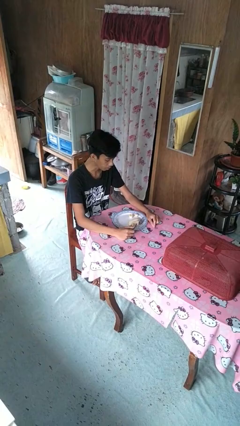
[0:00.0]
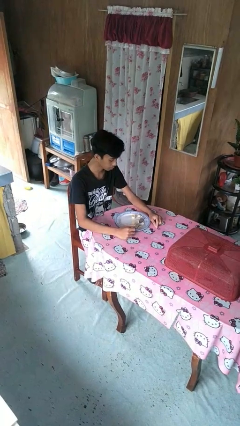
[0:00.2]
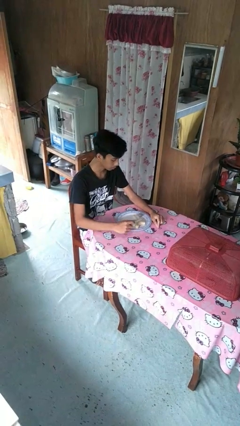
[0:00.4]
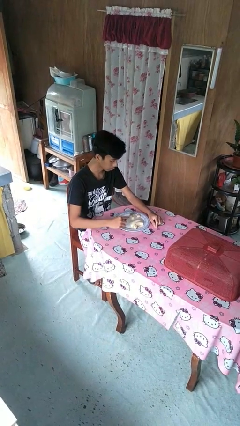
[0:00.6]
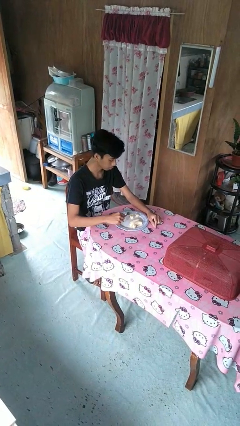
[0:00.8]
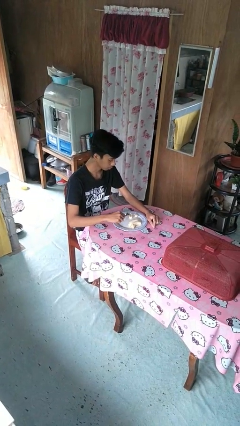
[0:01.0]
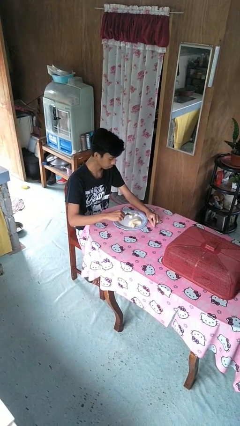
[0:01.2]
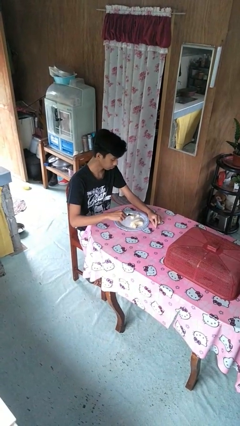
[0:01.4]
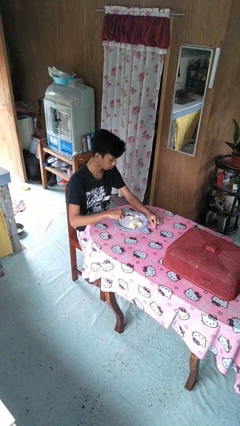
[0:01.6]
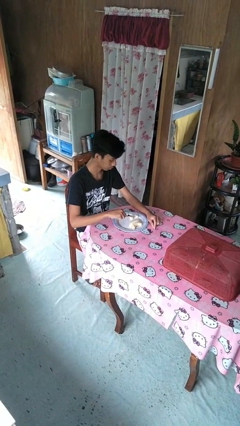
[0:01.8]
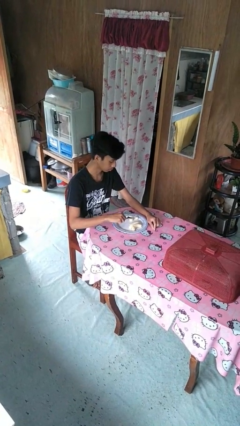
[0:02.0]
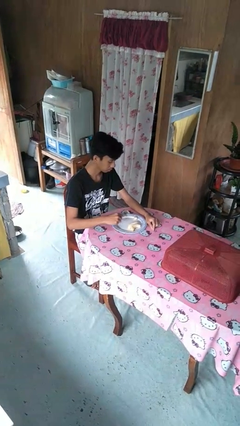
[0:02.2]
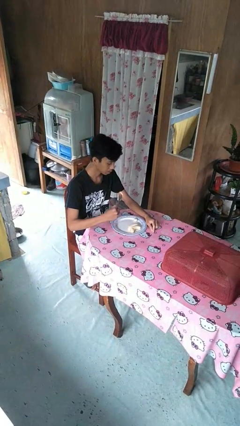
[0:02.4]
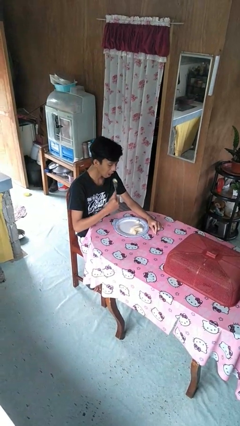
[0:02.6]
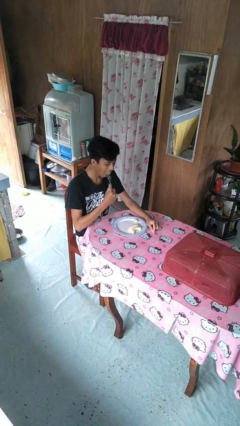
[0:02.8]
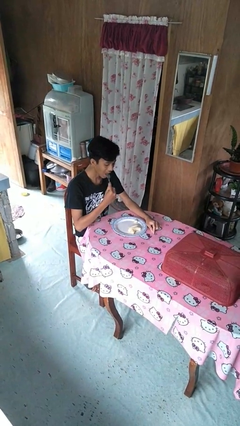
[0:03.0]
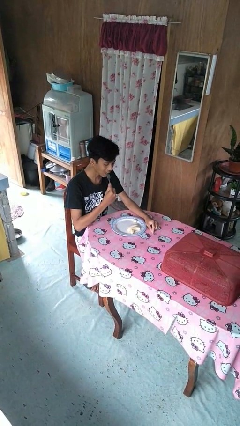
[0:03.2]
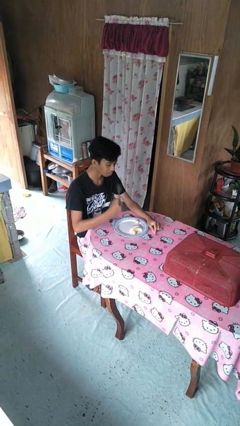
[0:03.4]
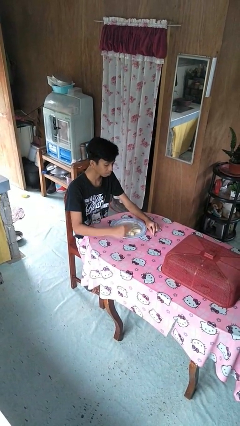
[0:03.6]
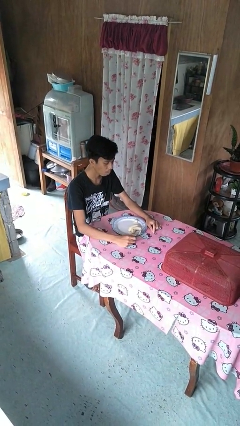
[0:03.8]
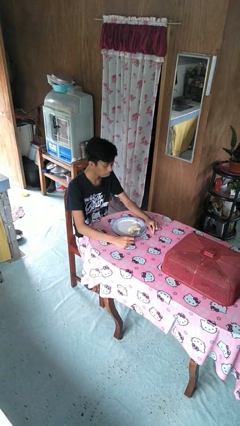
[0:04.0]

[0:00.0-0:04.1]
person eats with utensil

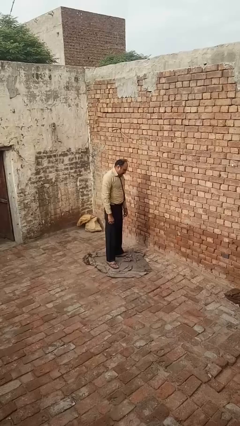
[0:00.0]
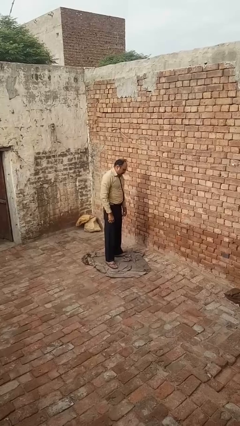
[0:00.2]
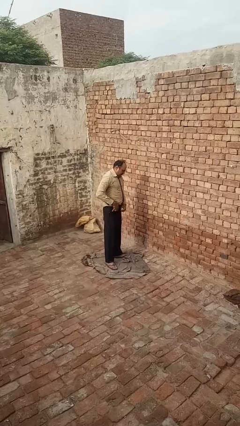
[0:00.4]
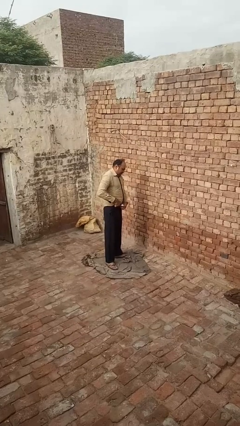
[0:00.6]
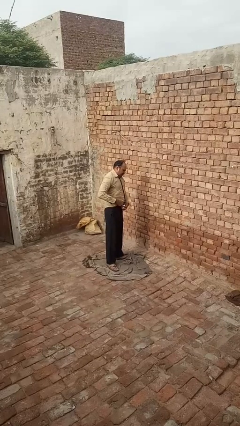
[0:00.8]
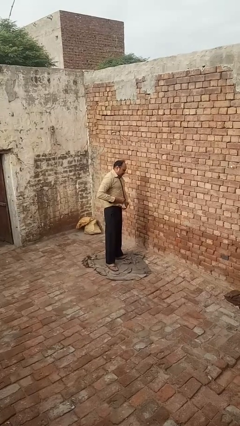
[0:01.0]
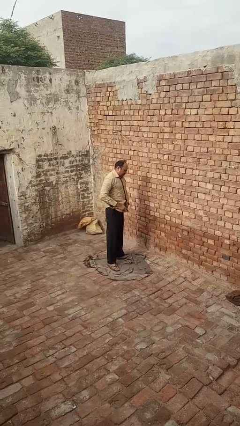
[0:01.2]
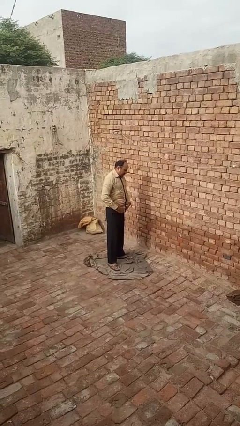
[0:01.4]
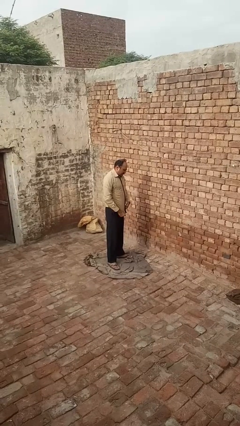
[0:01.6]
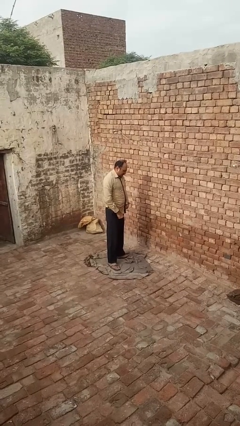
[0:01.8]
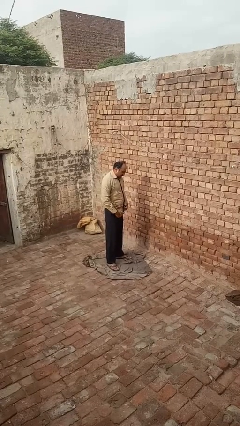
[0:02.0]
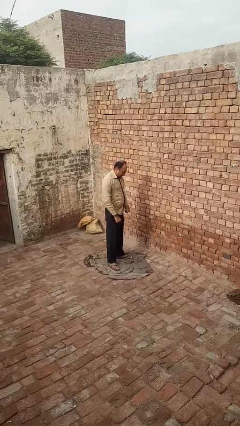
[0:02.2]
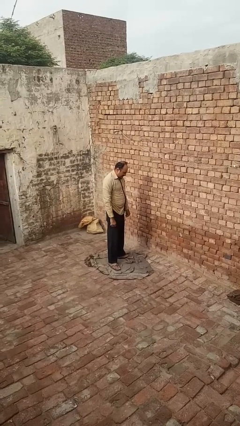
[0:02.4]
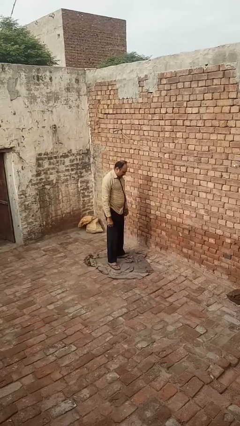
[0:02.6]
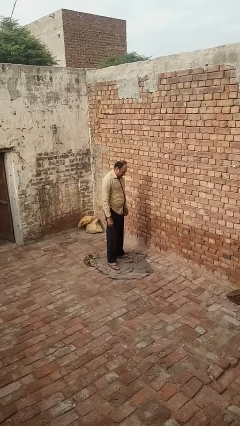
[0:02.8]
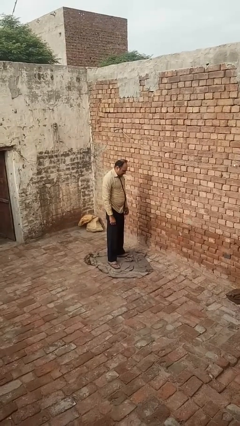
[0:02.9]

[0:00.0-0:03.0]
person untucks shirt

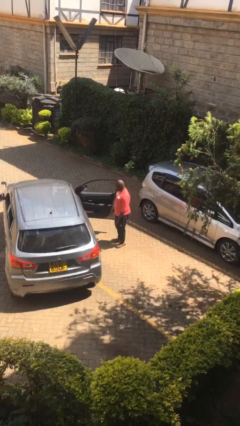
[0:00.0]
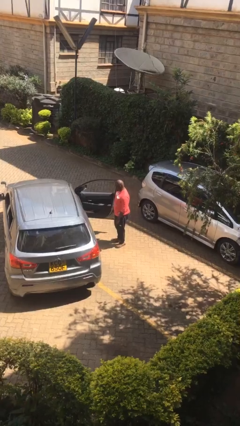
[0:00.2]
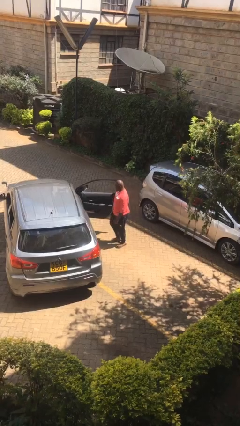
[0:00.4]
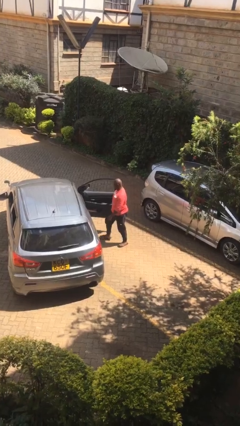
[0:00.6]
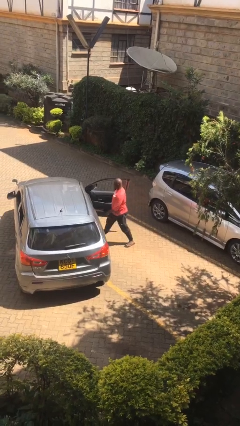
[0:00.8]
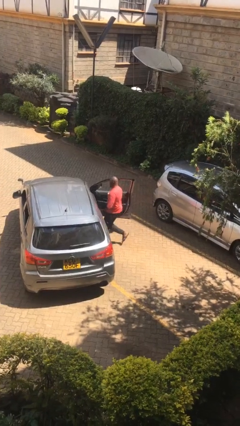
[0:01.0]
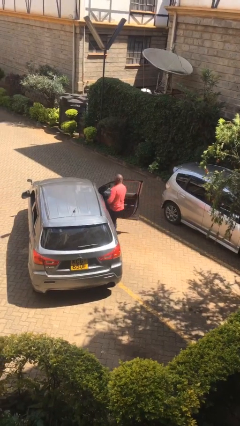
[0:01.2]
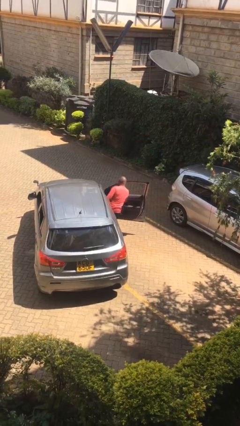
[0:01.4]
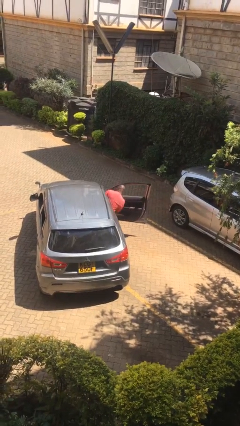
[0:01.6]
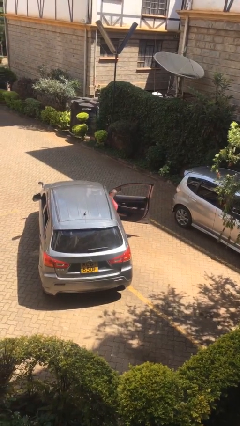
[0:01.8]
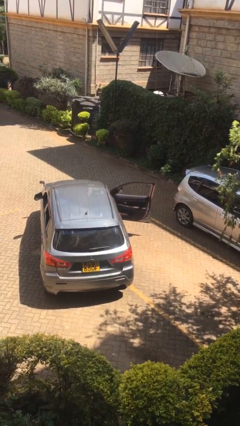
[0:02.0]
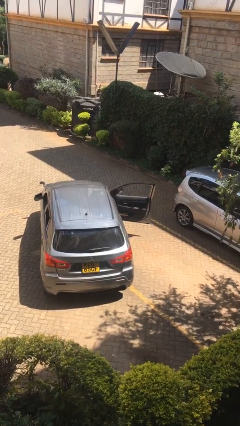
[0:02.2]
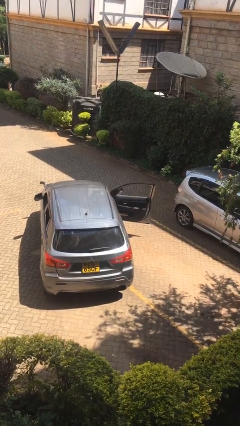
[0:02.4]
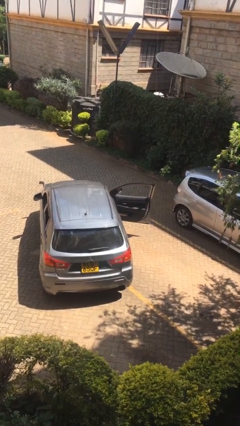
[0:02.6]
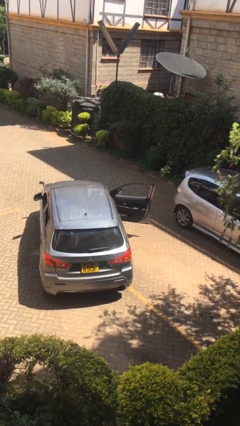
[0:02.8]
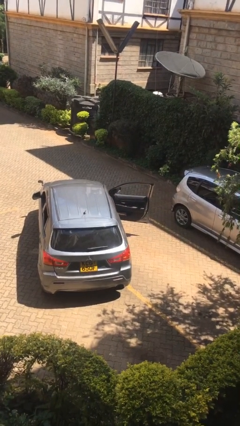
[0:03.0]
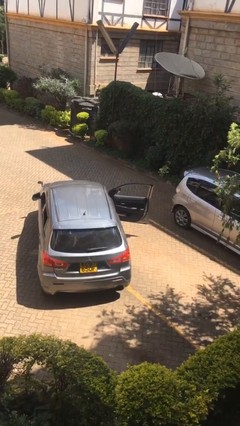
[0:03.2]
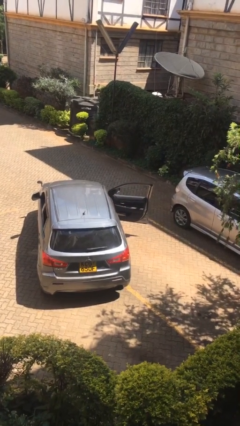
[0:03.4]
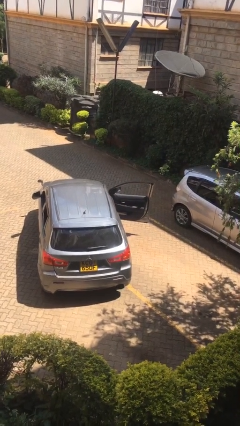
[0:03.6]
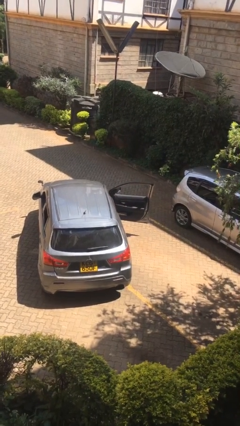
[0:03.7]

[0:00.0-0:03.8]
person enters car

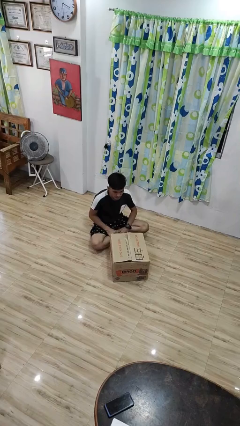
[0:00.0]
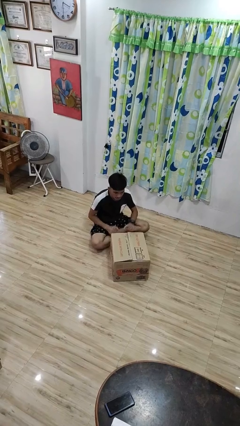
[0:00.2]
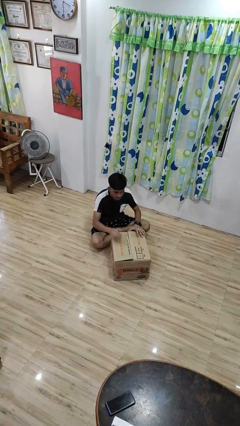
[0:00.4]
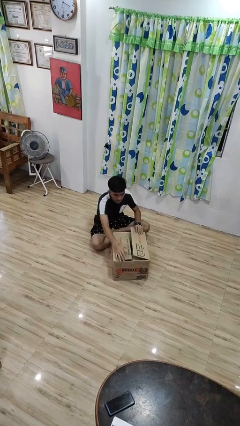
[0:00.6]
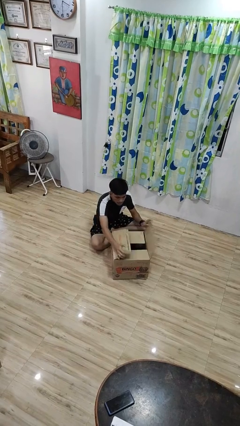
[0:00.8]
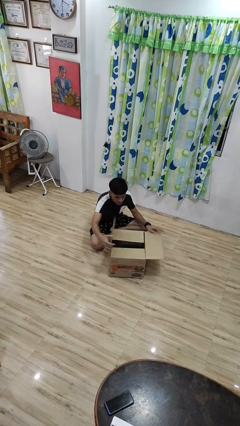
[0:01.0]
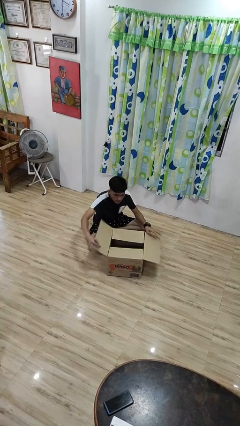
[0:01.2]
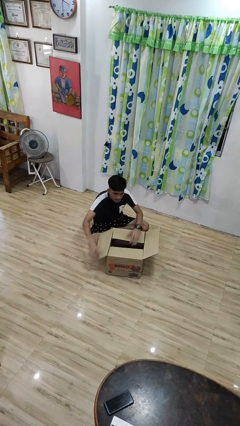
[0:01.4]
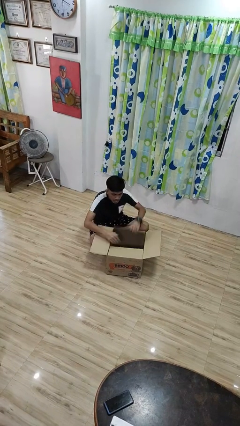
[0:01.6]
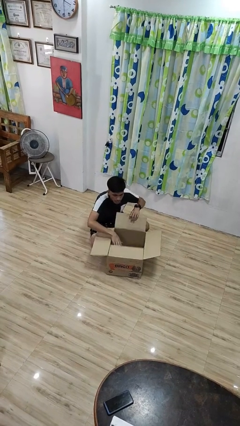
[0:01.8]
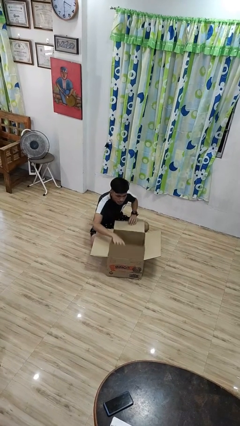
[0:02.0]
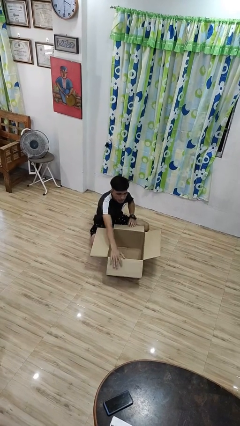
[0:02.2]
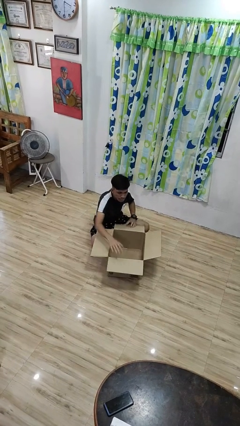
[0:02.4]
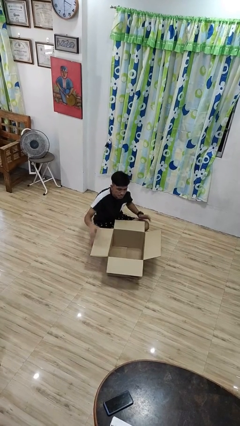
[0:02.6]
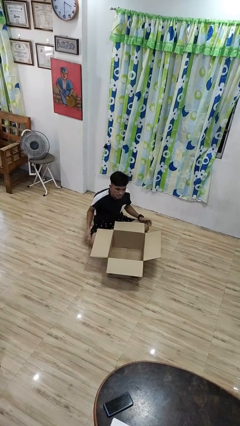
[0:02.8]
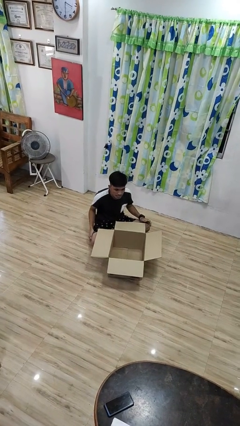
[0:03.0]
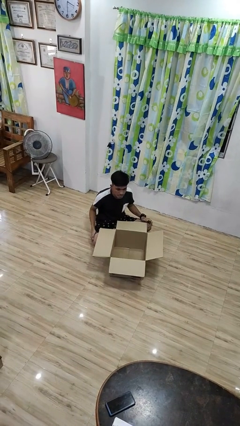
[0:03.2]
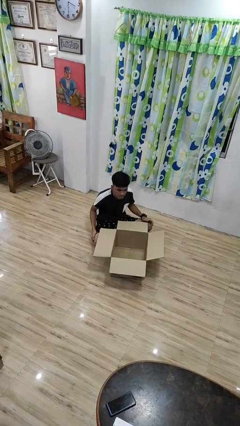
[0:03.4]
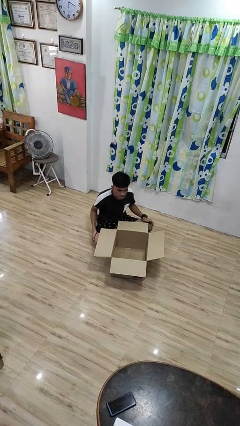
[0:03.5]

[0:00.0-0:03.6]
person opens box

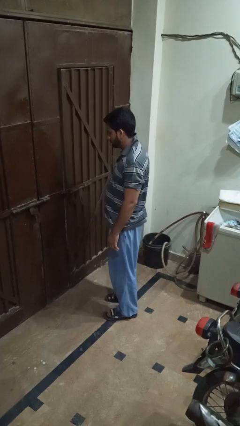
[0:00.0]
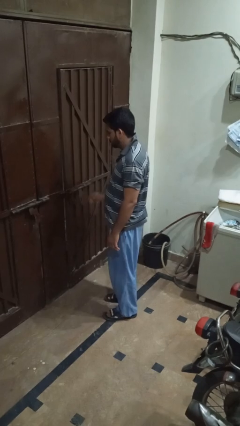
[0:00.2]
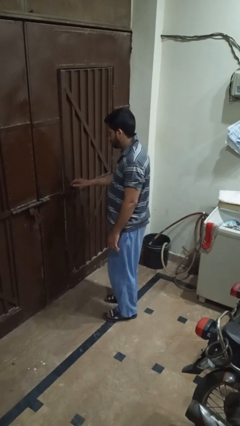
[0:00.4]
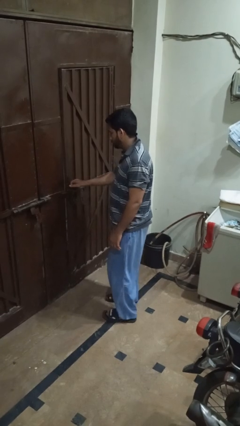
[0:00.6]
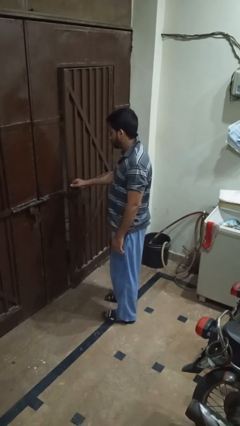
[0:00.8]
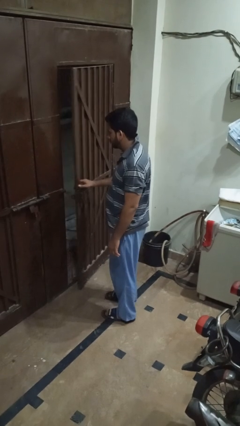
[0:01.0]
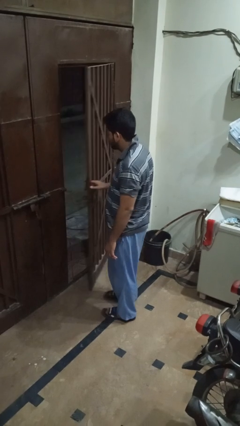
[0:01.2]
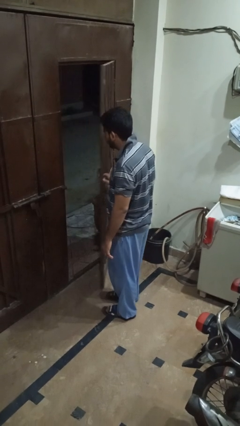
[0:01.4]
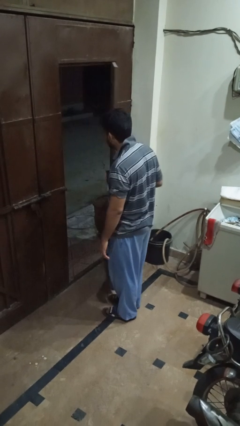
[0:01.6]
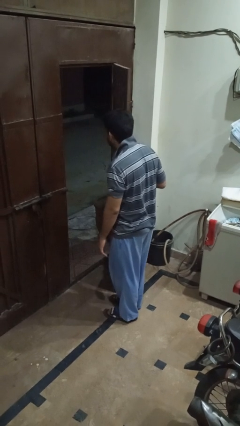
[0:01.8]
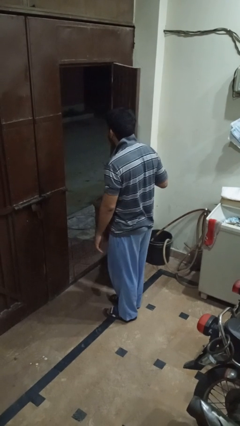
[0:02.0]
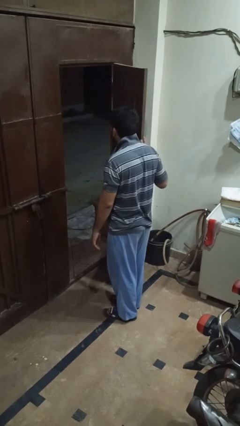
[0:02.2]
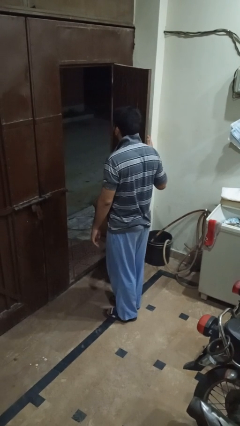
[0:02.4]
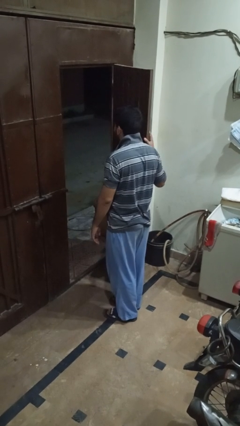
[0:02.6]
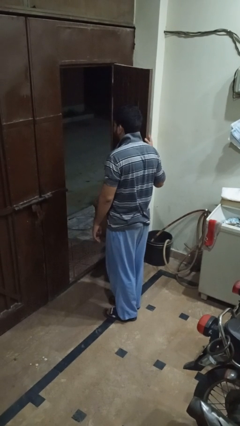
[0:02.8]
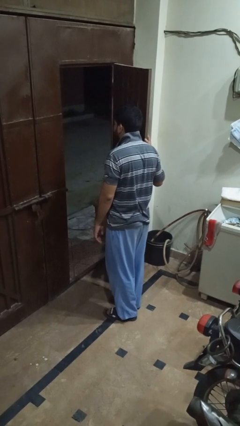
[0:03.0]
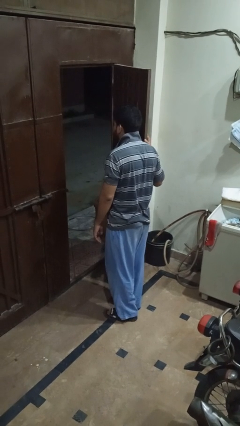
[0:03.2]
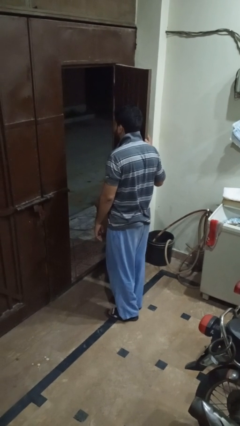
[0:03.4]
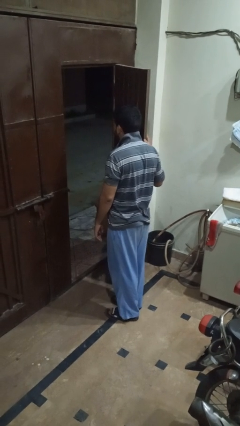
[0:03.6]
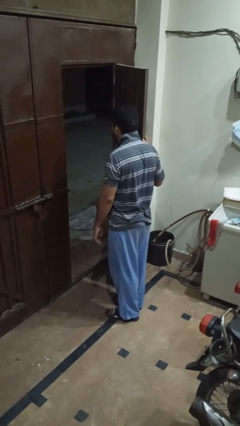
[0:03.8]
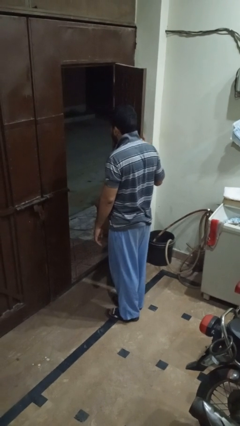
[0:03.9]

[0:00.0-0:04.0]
person opens gate
